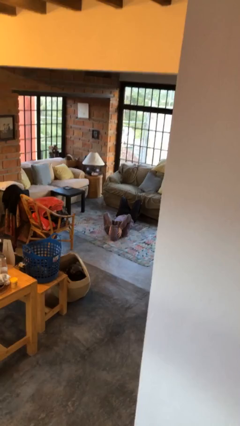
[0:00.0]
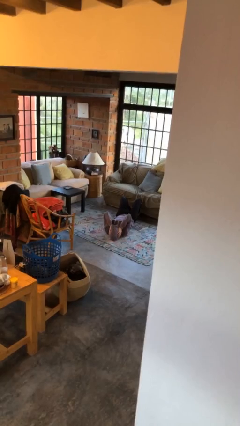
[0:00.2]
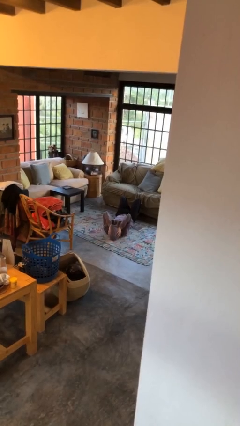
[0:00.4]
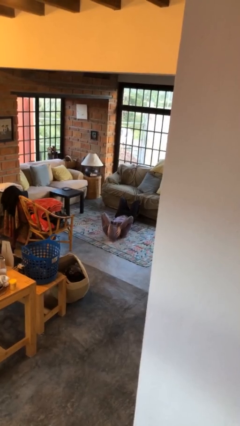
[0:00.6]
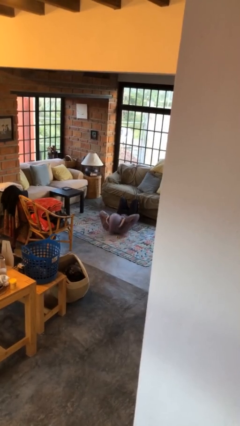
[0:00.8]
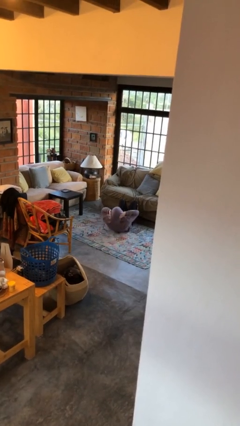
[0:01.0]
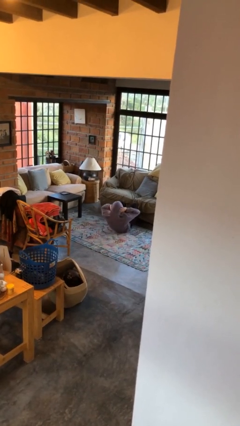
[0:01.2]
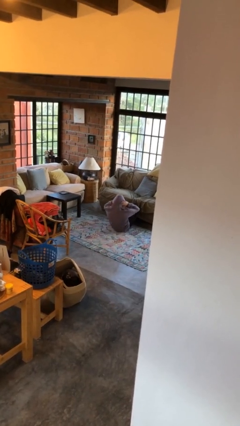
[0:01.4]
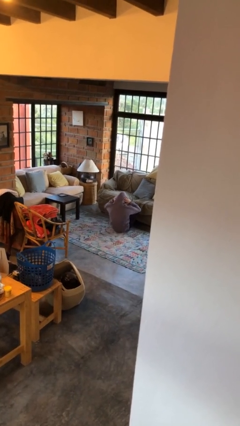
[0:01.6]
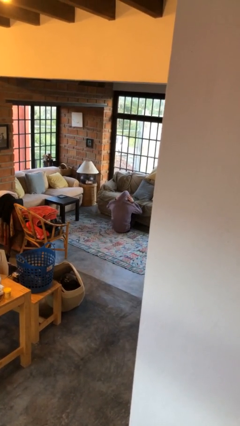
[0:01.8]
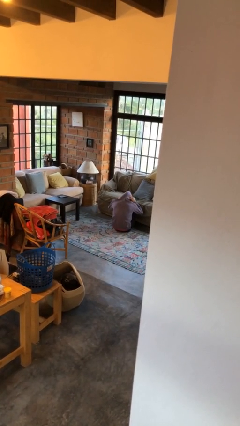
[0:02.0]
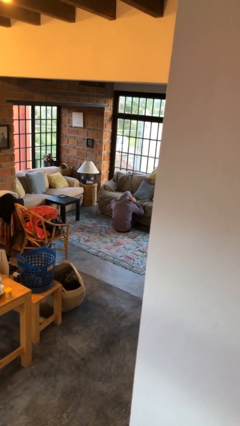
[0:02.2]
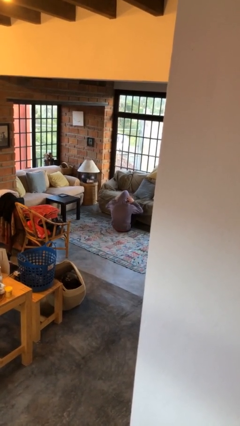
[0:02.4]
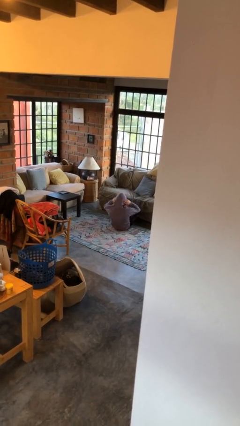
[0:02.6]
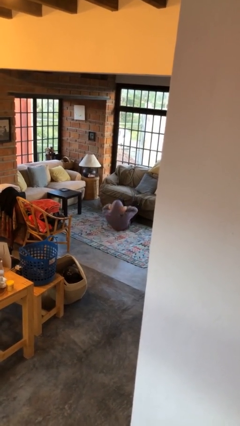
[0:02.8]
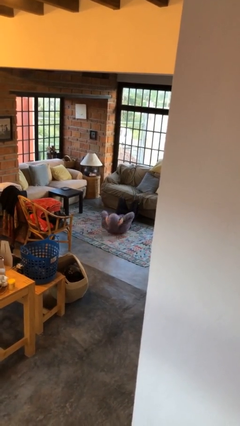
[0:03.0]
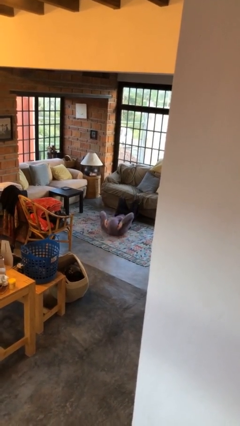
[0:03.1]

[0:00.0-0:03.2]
person exercises with situp

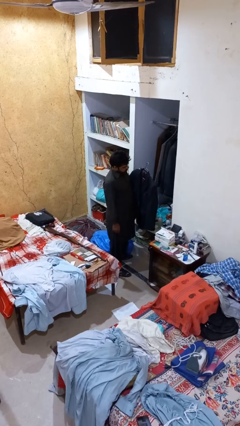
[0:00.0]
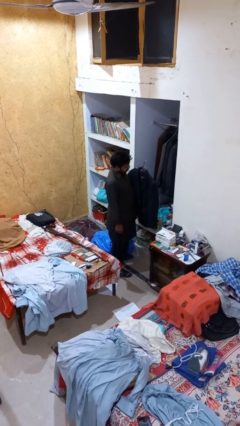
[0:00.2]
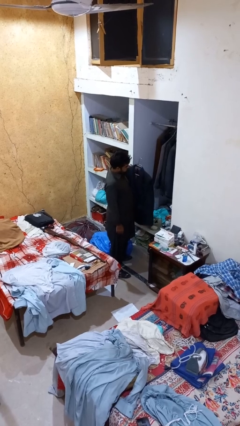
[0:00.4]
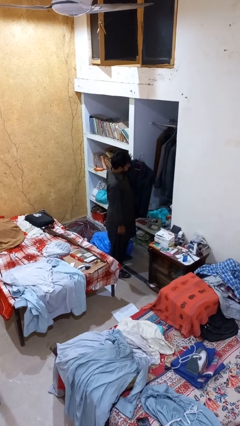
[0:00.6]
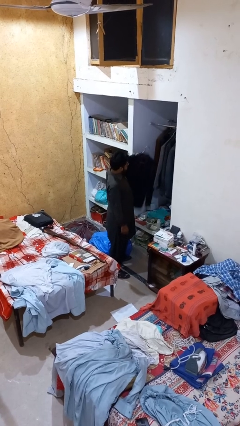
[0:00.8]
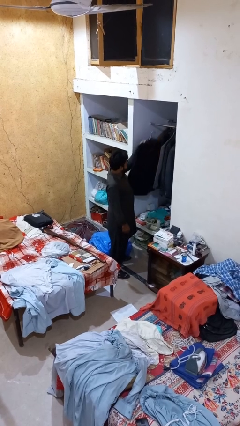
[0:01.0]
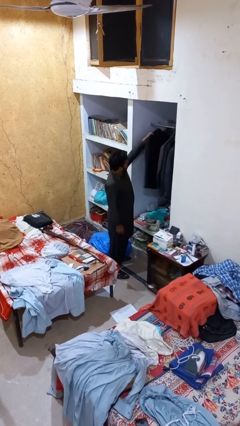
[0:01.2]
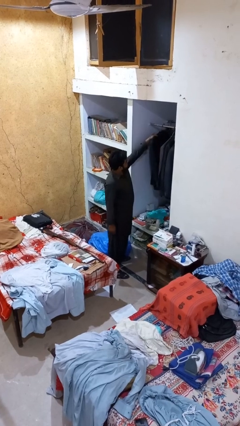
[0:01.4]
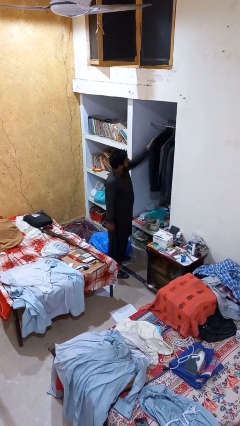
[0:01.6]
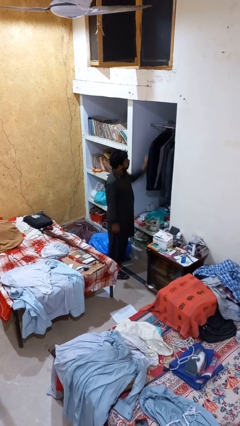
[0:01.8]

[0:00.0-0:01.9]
person puts clothes into closet

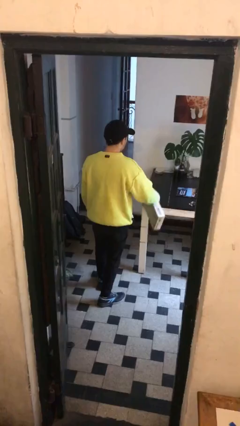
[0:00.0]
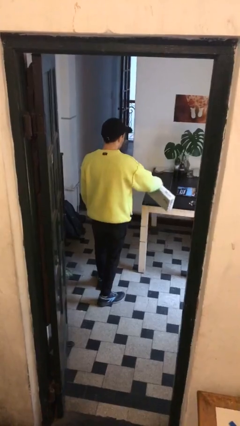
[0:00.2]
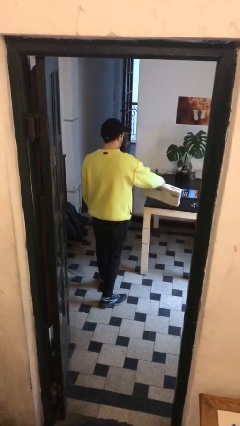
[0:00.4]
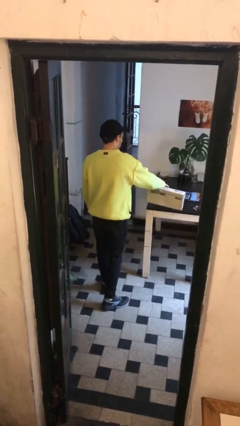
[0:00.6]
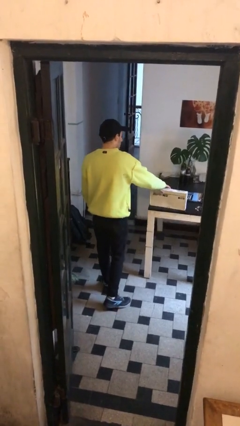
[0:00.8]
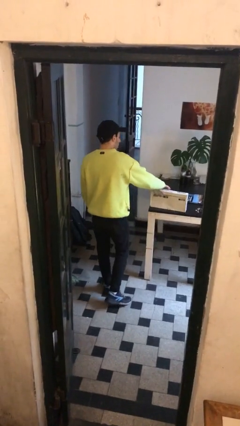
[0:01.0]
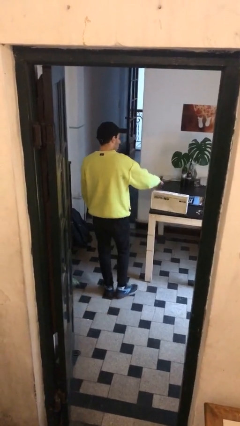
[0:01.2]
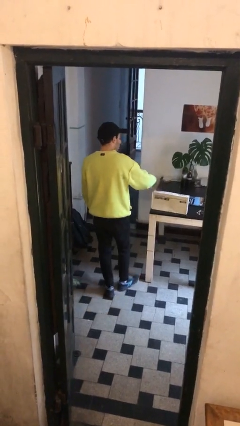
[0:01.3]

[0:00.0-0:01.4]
person puts down object on table

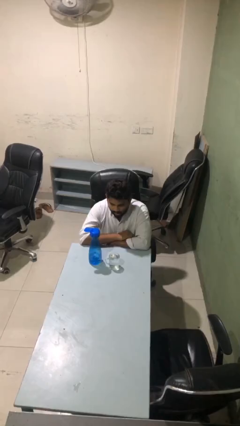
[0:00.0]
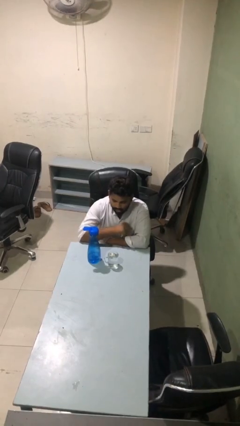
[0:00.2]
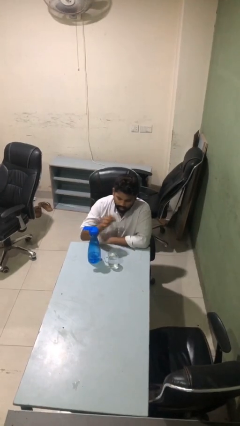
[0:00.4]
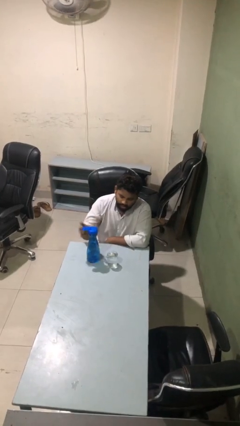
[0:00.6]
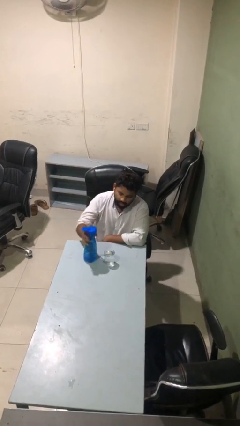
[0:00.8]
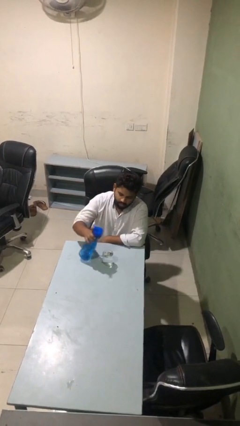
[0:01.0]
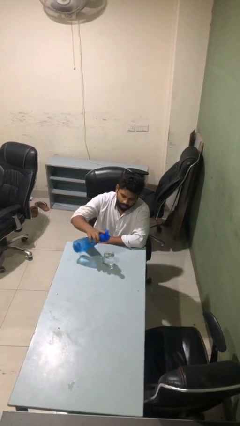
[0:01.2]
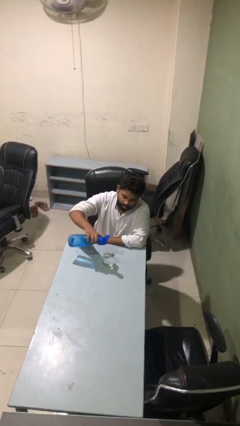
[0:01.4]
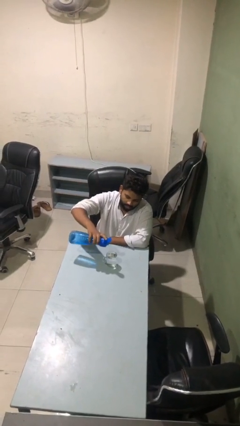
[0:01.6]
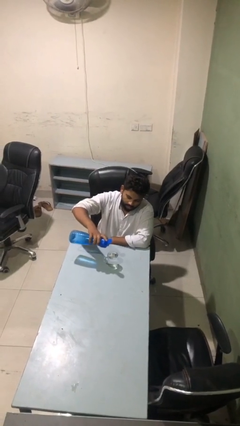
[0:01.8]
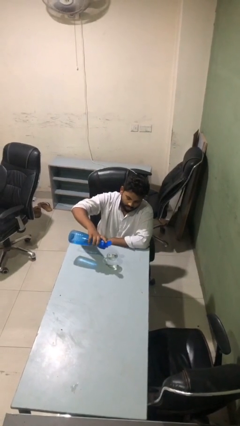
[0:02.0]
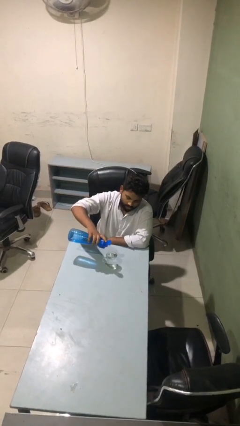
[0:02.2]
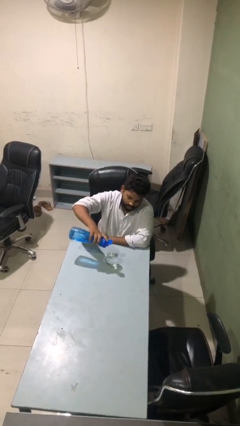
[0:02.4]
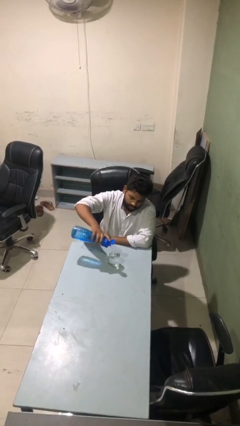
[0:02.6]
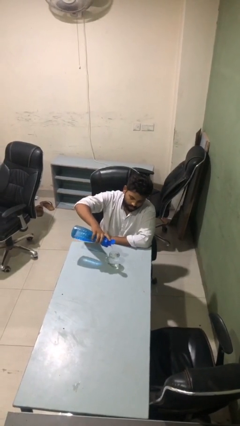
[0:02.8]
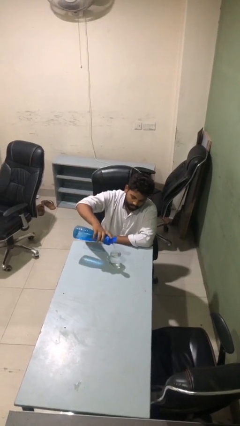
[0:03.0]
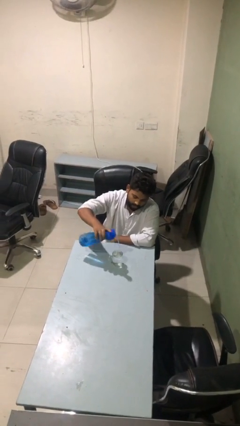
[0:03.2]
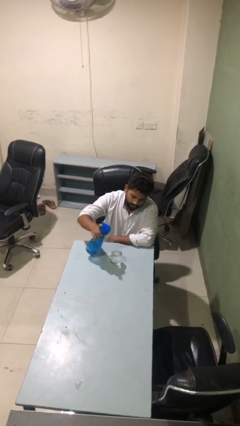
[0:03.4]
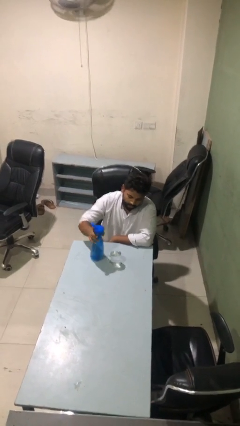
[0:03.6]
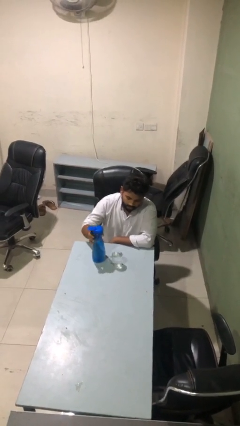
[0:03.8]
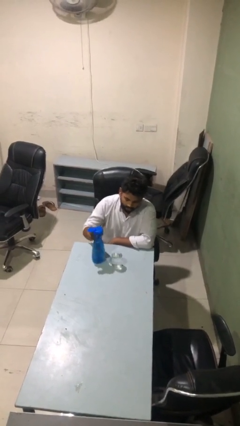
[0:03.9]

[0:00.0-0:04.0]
person pours liquid into cup

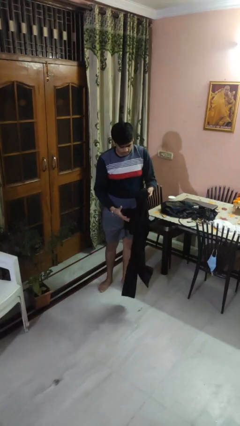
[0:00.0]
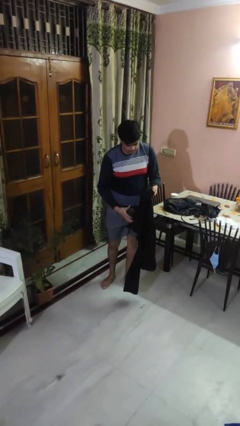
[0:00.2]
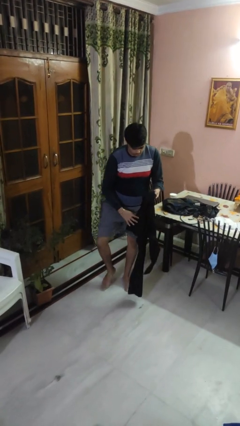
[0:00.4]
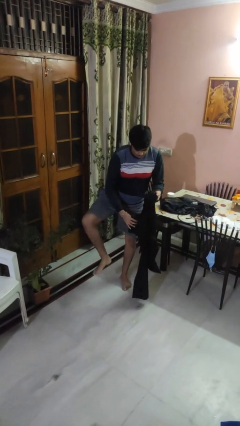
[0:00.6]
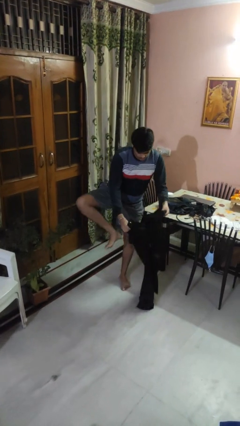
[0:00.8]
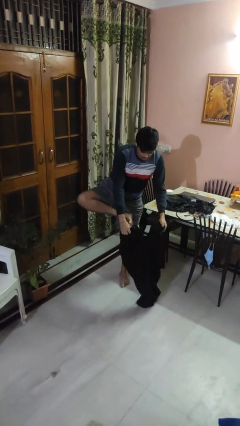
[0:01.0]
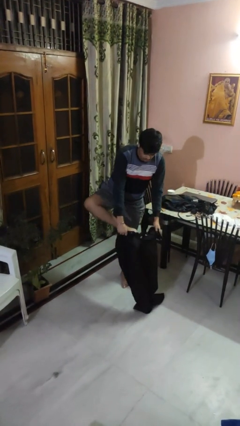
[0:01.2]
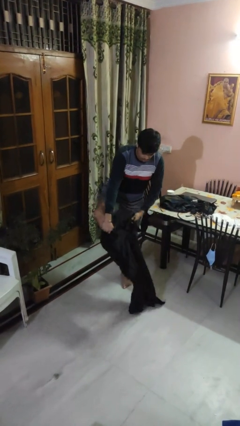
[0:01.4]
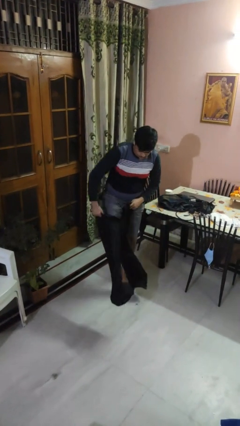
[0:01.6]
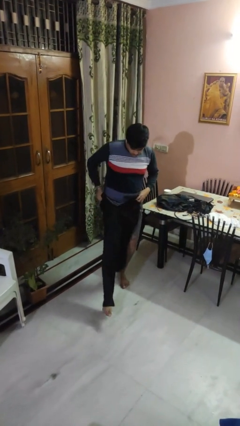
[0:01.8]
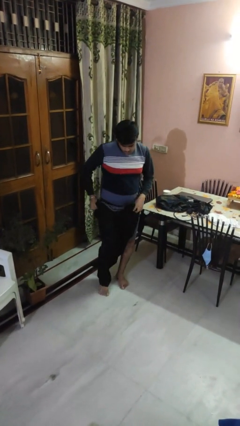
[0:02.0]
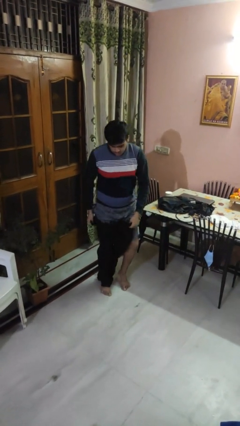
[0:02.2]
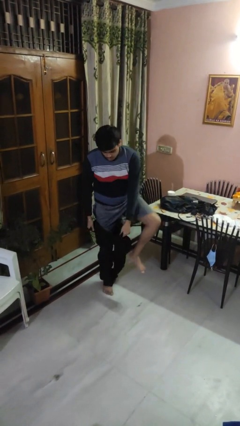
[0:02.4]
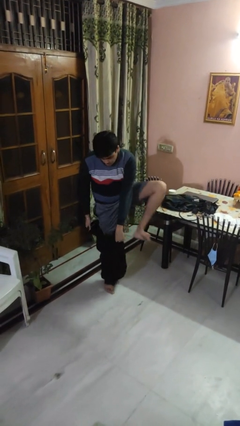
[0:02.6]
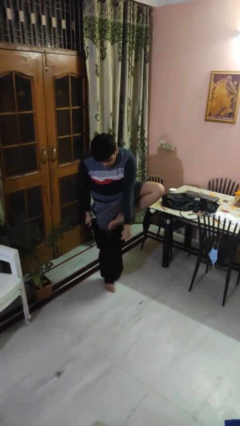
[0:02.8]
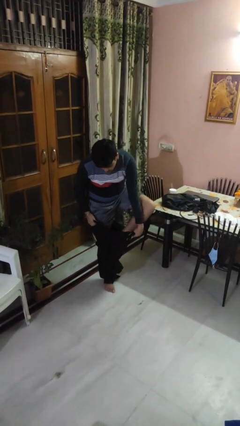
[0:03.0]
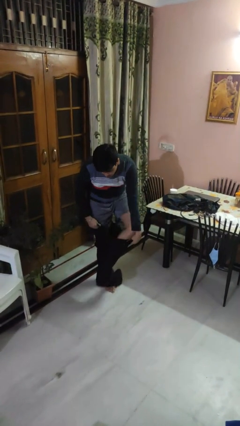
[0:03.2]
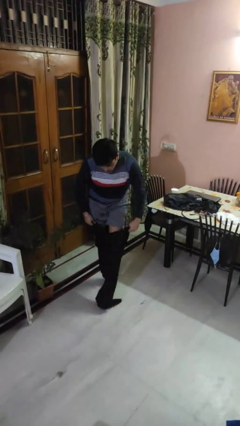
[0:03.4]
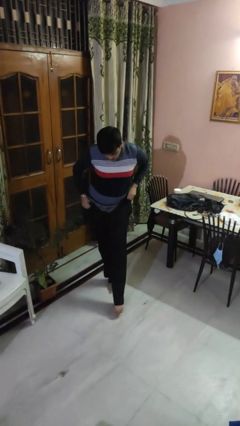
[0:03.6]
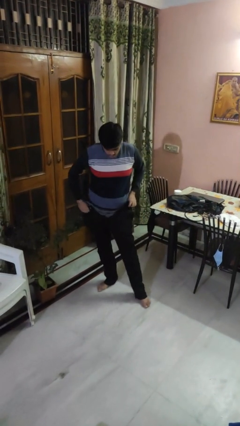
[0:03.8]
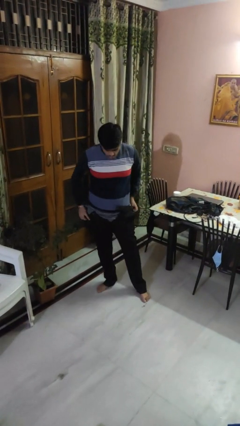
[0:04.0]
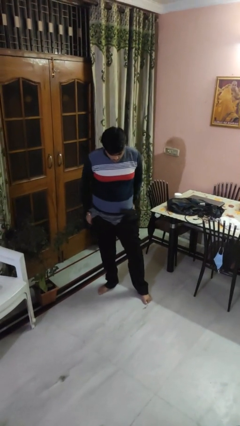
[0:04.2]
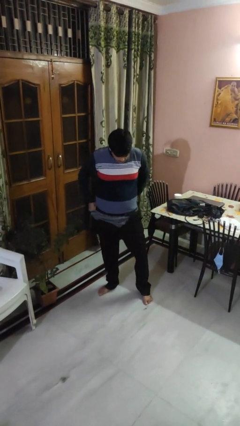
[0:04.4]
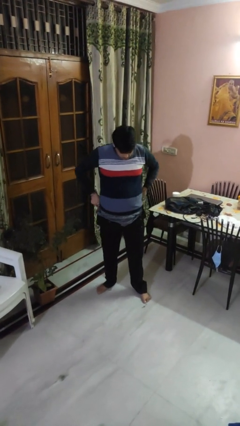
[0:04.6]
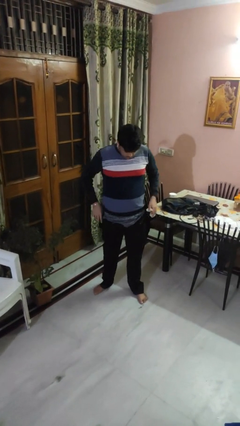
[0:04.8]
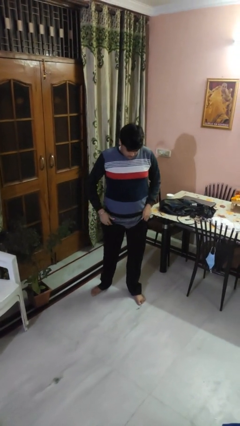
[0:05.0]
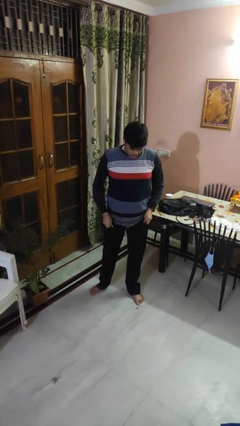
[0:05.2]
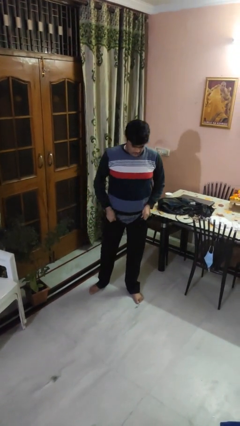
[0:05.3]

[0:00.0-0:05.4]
person puts on pants

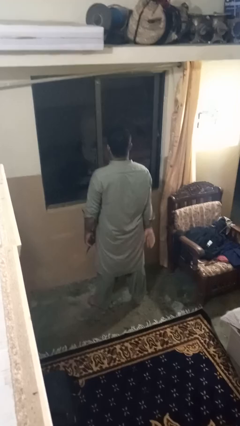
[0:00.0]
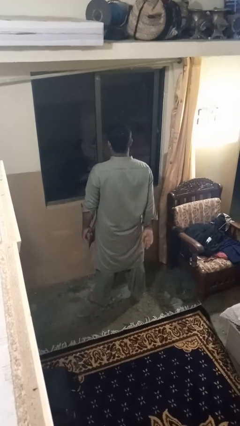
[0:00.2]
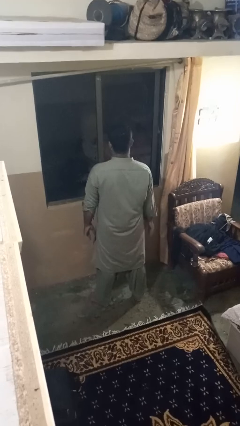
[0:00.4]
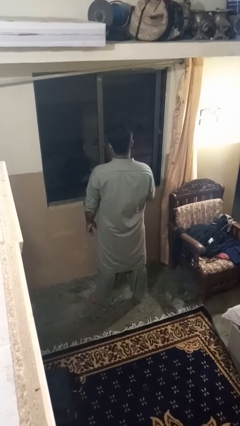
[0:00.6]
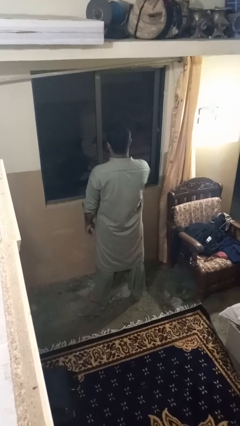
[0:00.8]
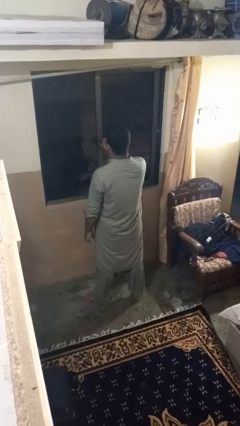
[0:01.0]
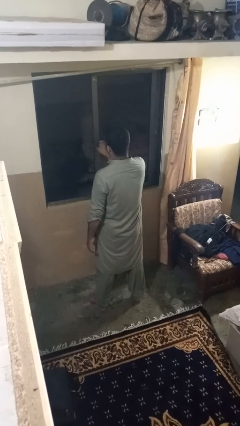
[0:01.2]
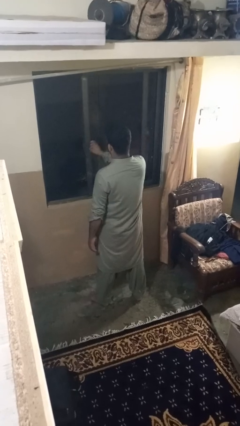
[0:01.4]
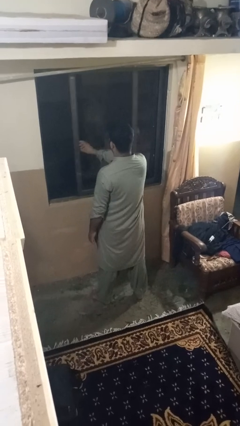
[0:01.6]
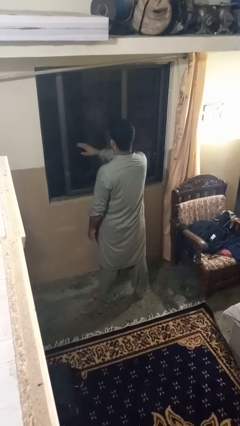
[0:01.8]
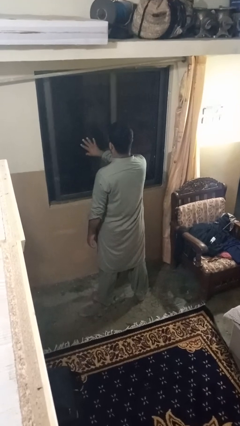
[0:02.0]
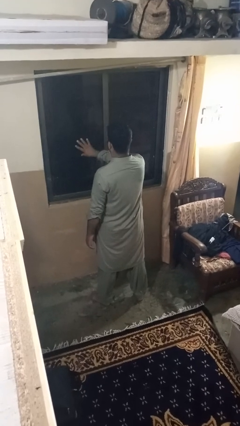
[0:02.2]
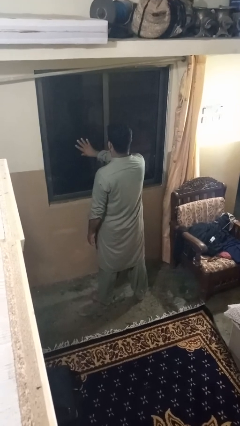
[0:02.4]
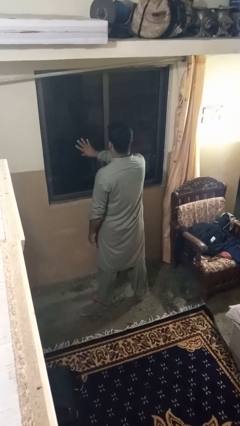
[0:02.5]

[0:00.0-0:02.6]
person closes home window
